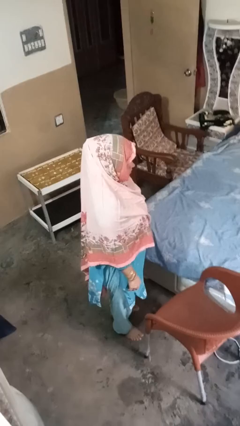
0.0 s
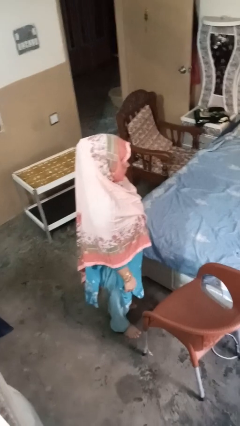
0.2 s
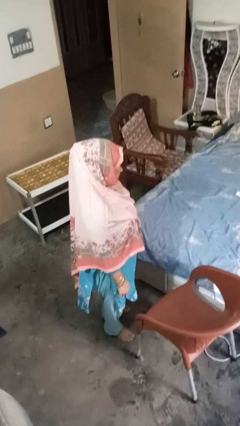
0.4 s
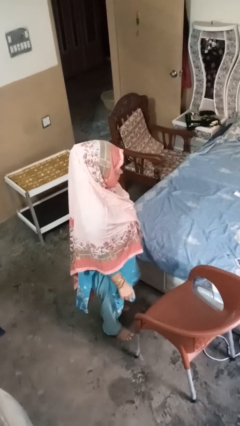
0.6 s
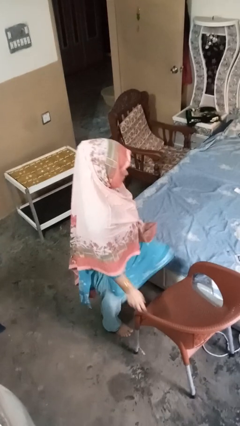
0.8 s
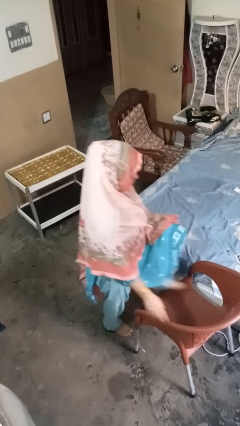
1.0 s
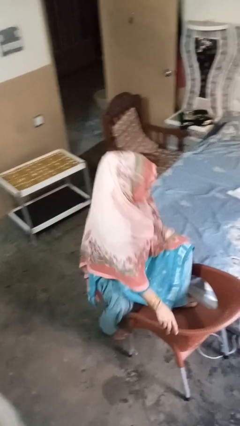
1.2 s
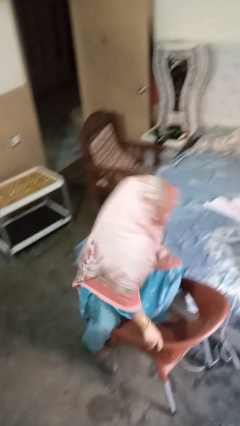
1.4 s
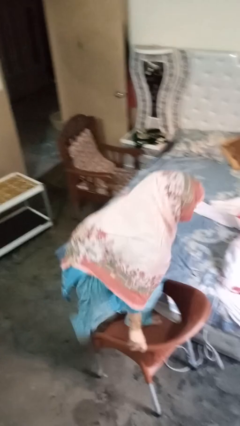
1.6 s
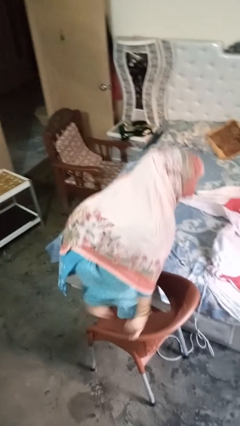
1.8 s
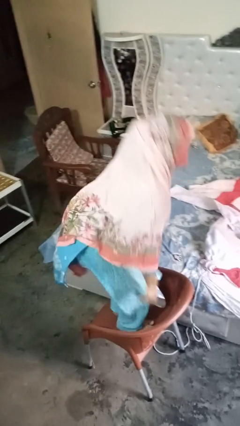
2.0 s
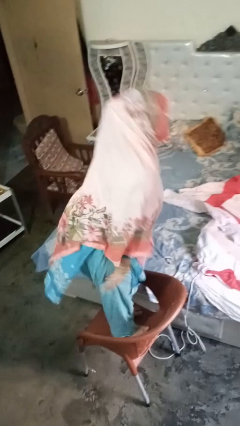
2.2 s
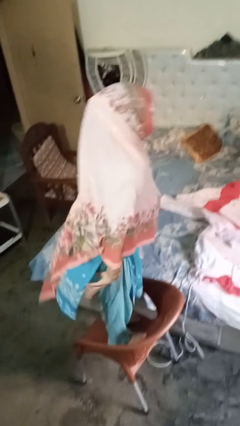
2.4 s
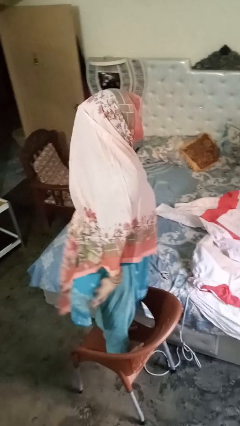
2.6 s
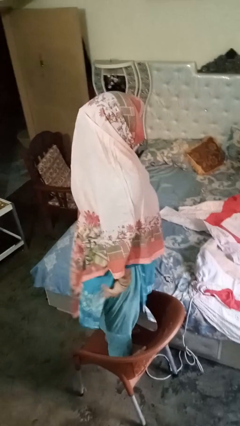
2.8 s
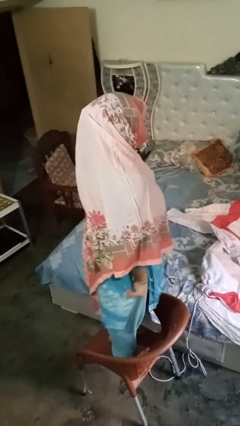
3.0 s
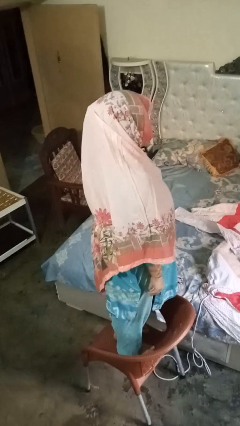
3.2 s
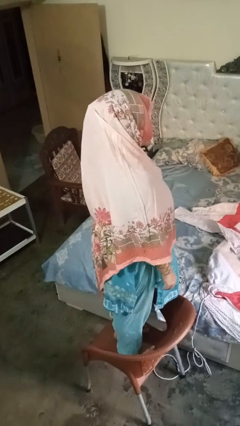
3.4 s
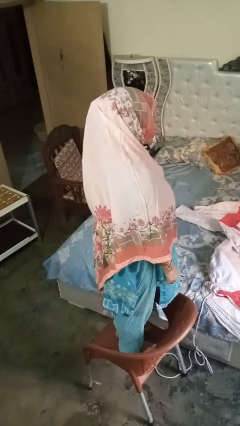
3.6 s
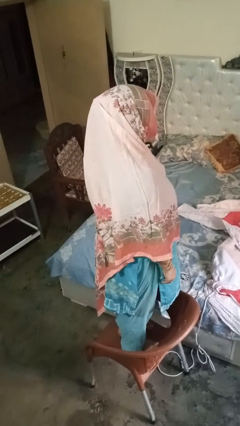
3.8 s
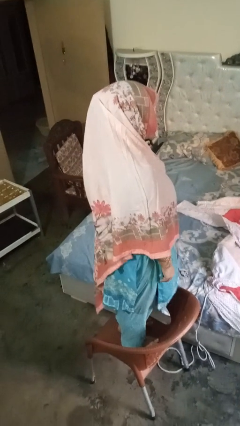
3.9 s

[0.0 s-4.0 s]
person climbs on chair

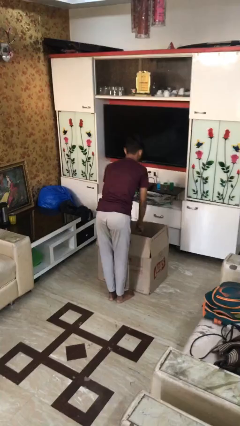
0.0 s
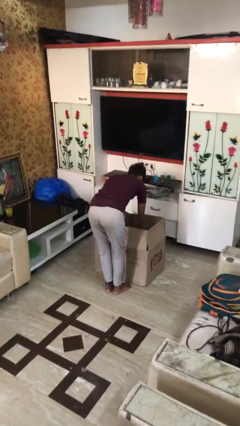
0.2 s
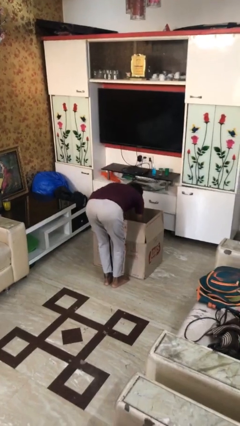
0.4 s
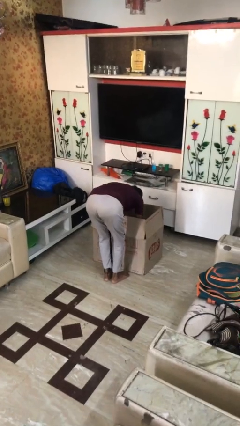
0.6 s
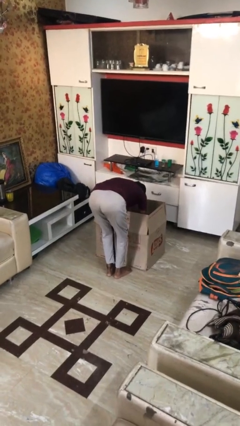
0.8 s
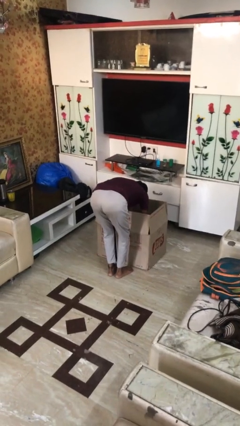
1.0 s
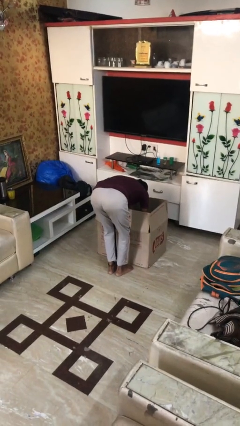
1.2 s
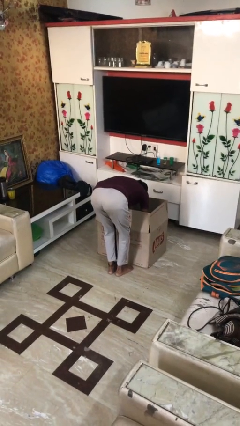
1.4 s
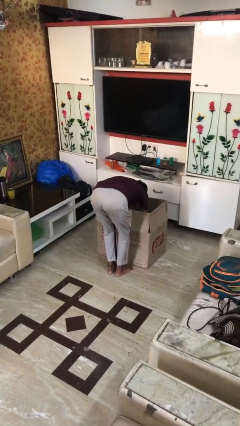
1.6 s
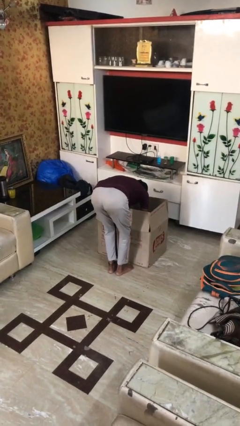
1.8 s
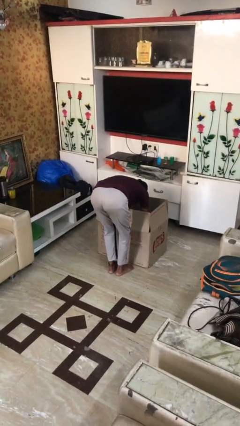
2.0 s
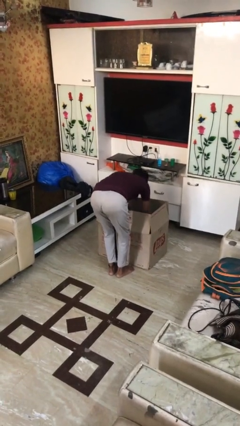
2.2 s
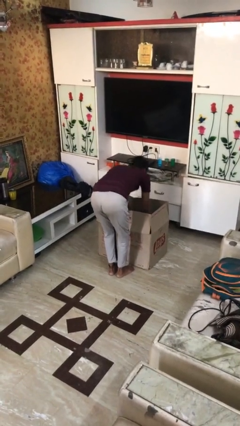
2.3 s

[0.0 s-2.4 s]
person searches in box

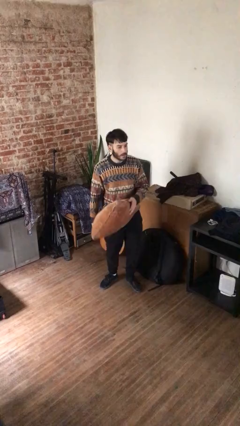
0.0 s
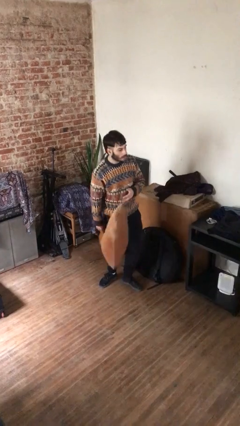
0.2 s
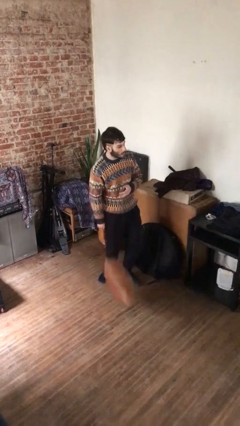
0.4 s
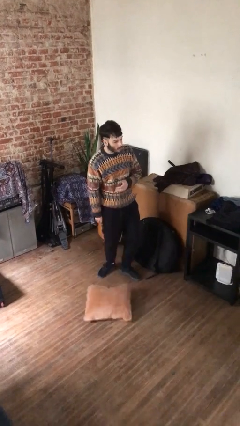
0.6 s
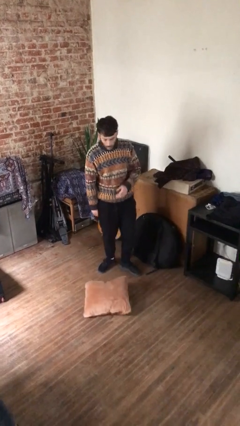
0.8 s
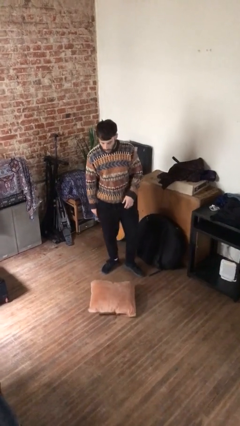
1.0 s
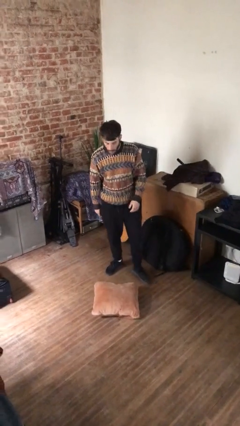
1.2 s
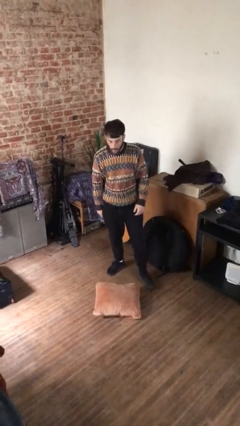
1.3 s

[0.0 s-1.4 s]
person drops object

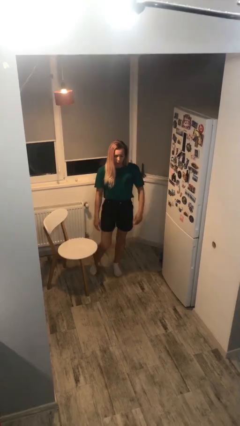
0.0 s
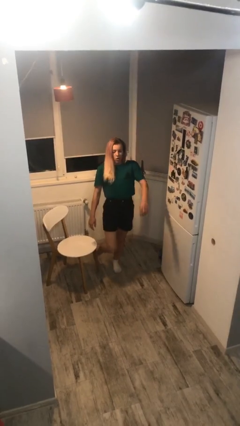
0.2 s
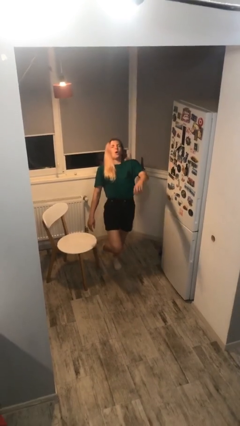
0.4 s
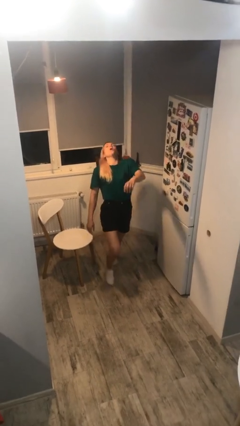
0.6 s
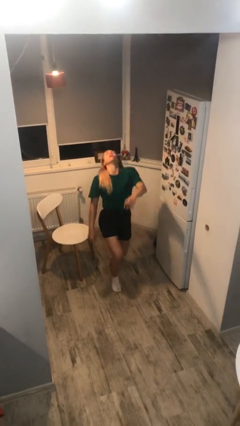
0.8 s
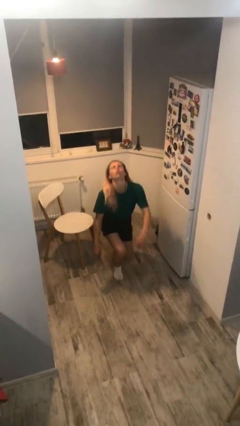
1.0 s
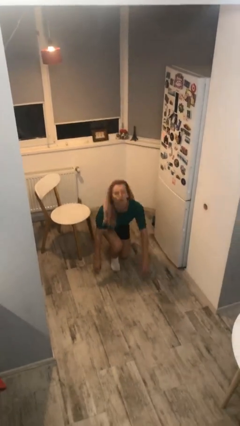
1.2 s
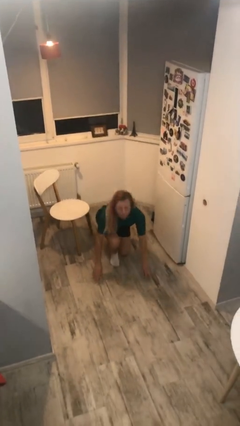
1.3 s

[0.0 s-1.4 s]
person trips on object on floor

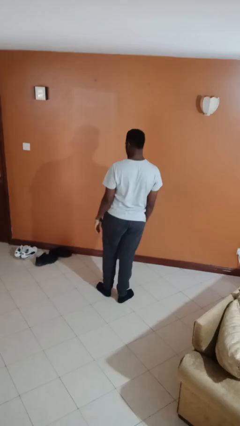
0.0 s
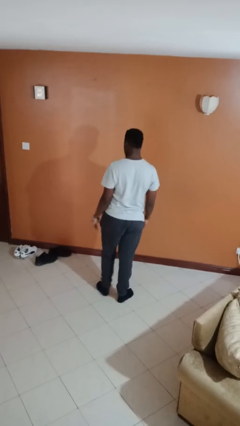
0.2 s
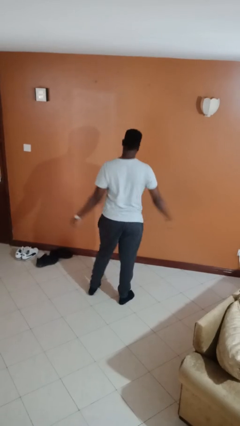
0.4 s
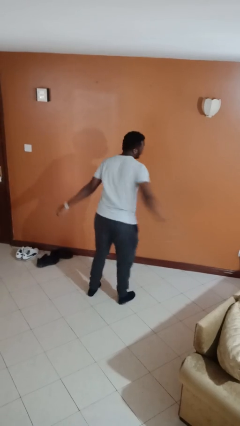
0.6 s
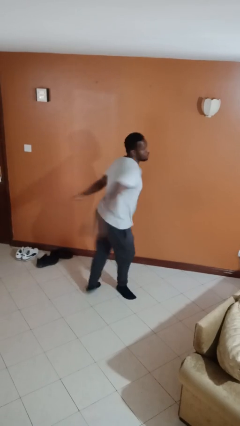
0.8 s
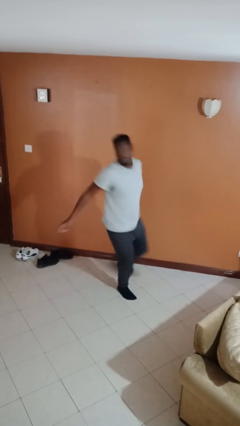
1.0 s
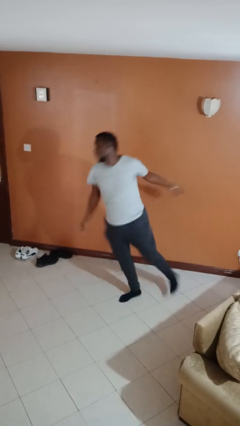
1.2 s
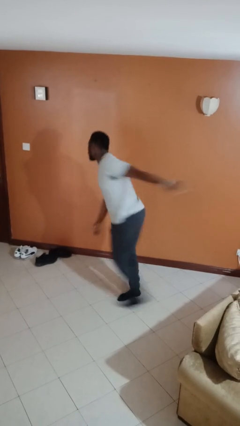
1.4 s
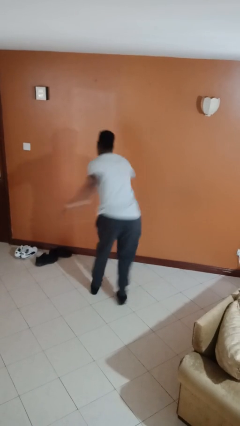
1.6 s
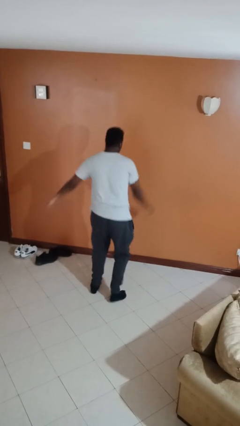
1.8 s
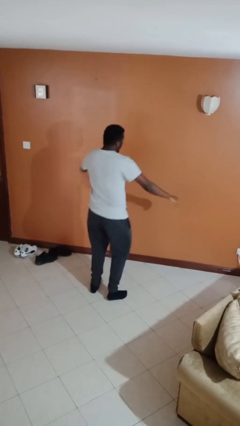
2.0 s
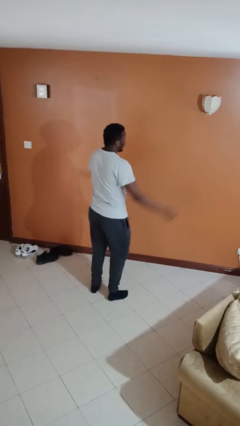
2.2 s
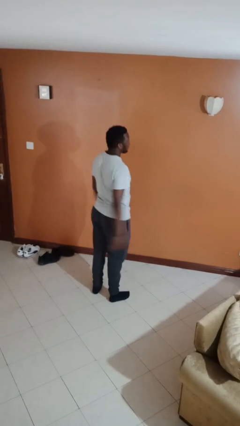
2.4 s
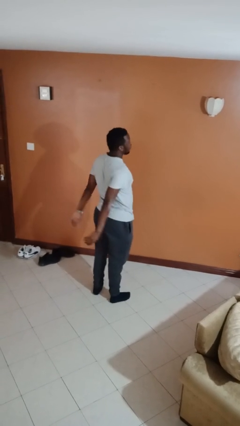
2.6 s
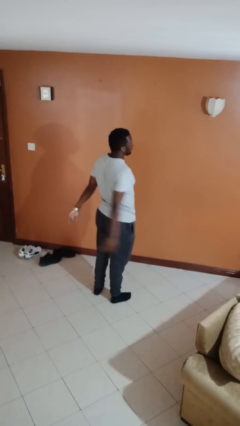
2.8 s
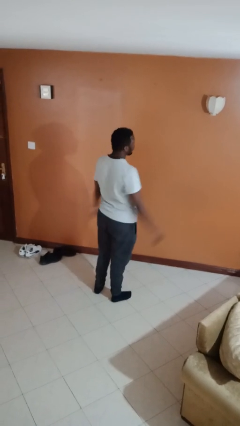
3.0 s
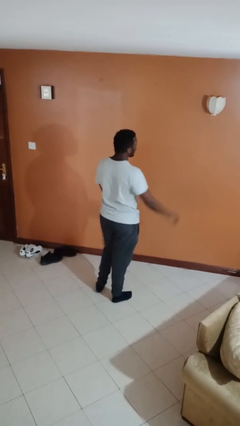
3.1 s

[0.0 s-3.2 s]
person twirls

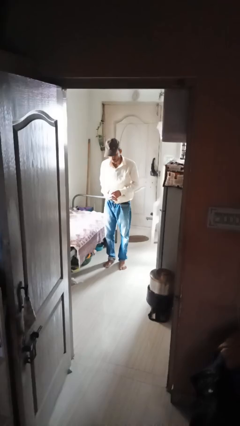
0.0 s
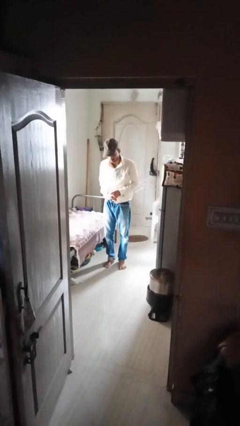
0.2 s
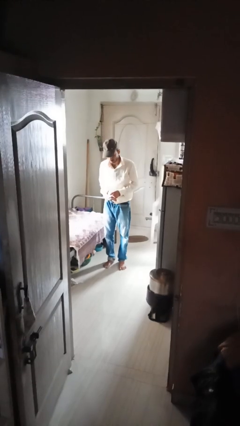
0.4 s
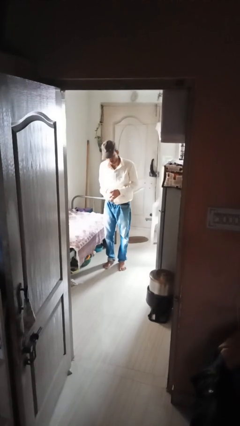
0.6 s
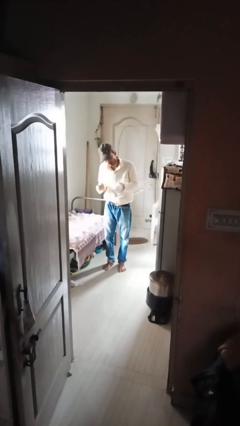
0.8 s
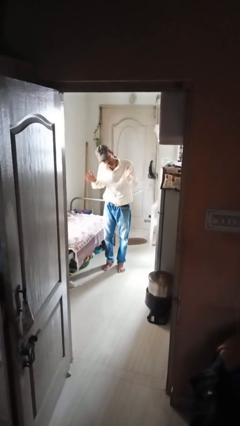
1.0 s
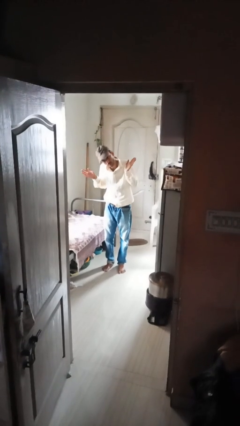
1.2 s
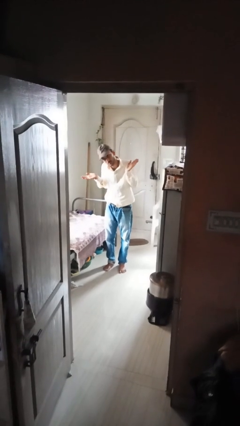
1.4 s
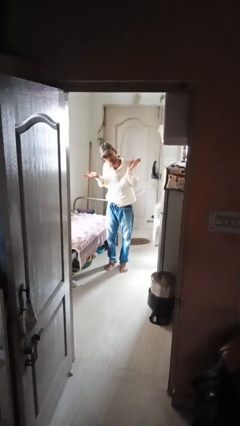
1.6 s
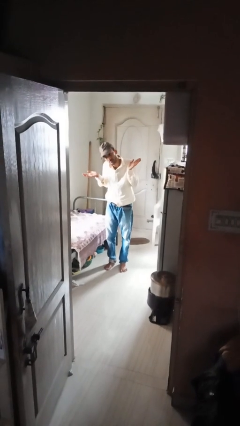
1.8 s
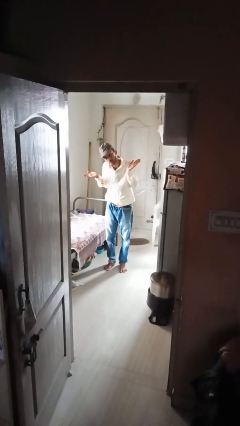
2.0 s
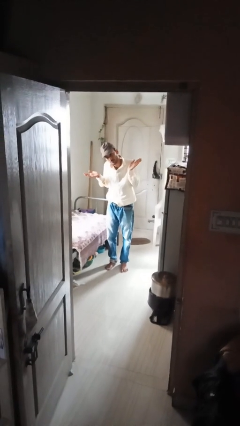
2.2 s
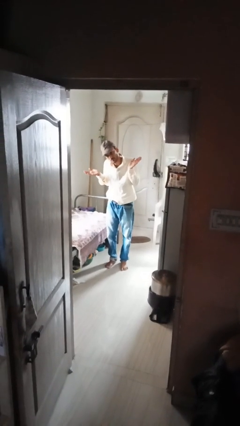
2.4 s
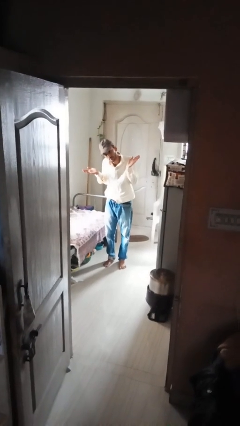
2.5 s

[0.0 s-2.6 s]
person shrugs

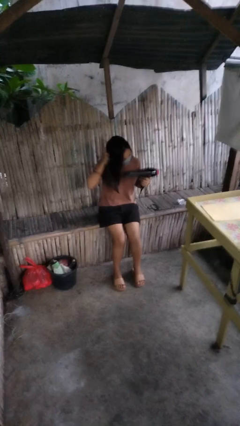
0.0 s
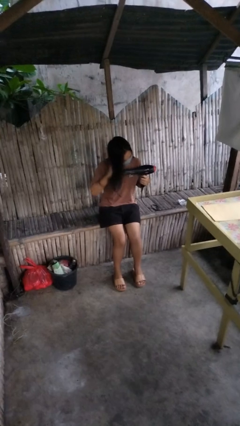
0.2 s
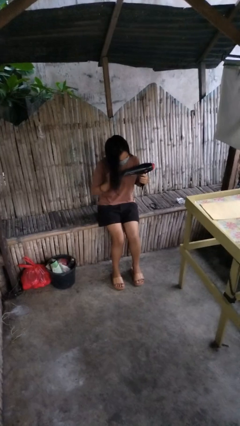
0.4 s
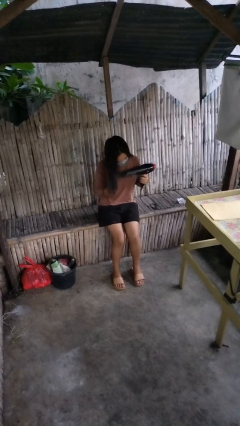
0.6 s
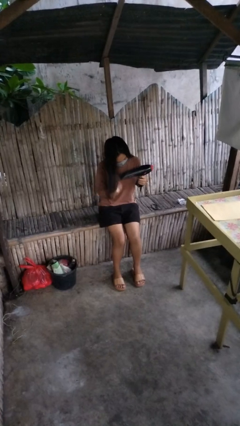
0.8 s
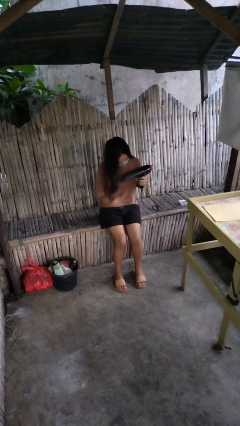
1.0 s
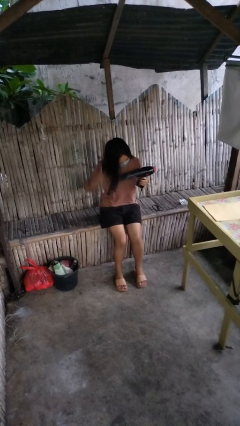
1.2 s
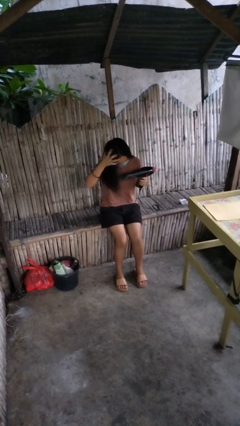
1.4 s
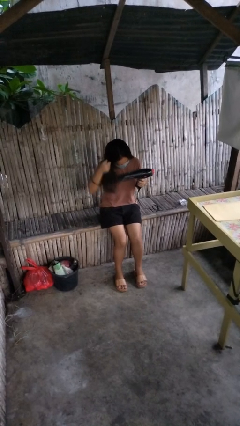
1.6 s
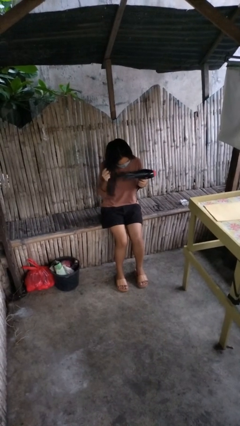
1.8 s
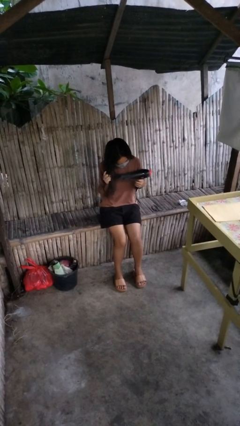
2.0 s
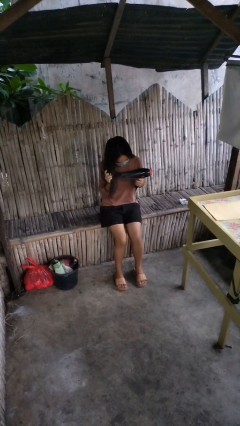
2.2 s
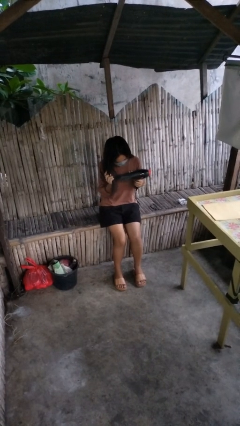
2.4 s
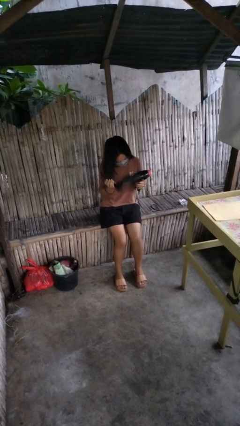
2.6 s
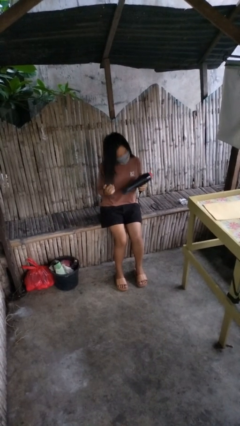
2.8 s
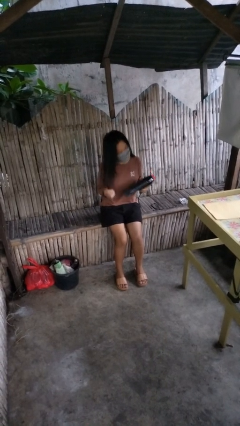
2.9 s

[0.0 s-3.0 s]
person dries hair with hairdryer
